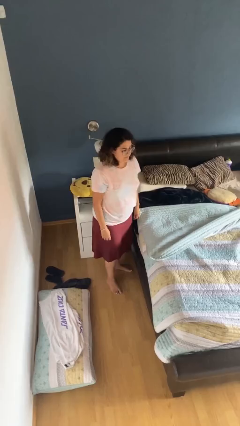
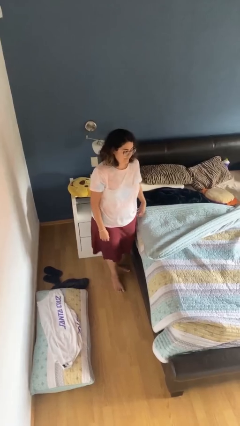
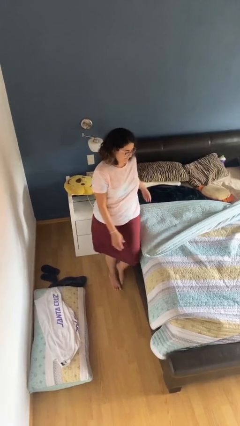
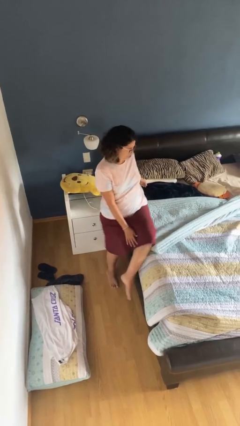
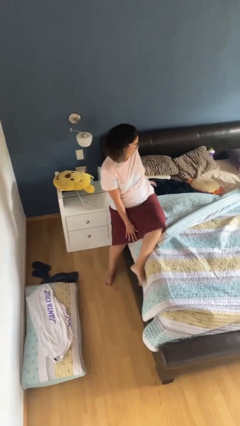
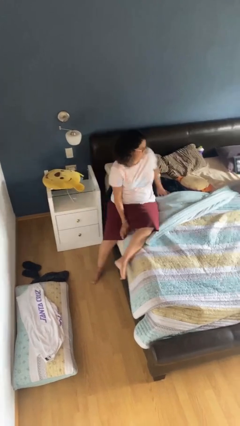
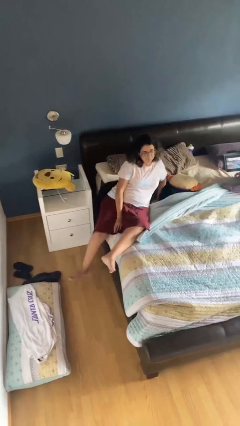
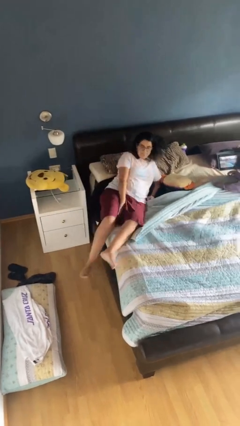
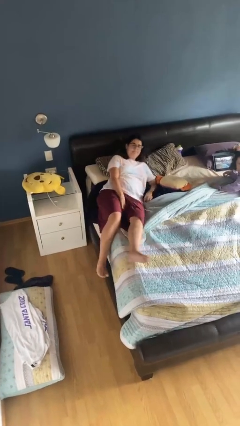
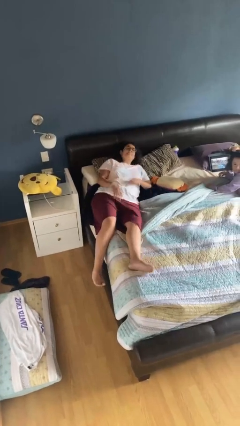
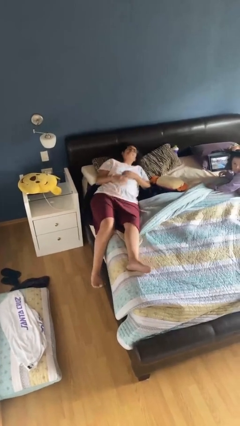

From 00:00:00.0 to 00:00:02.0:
person lies down on bed

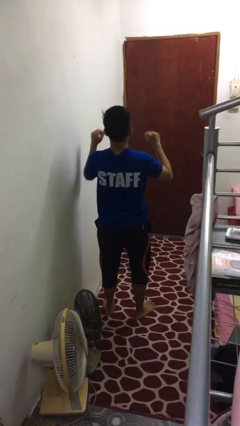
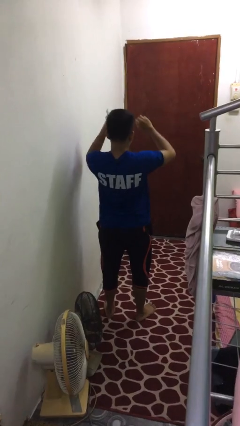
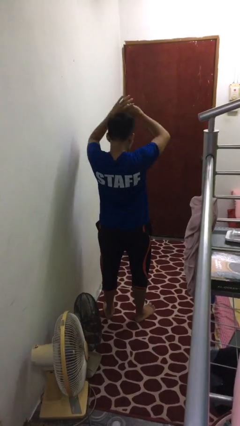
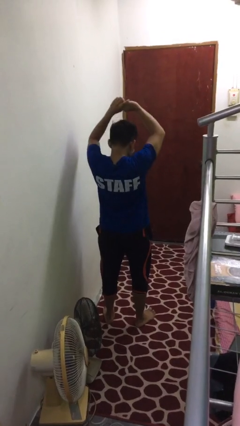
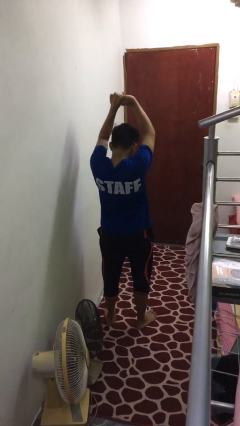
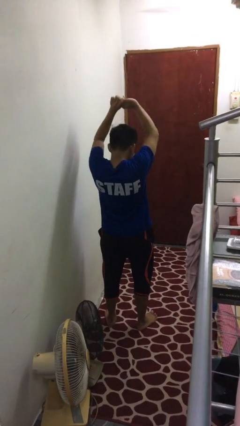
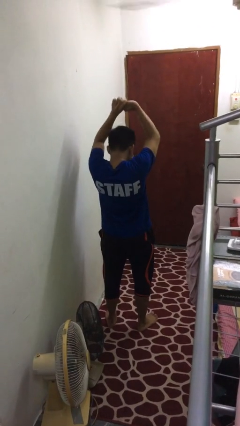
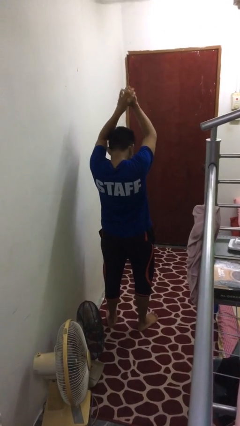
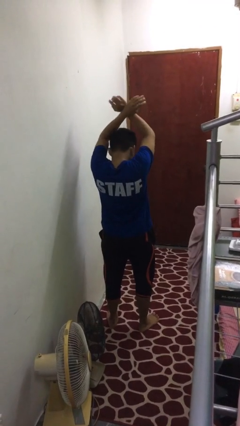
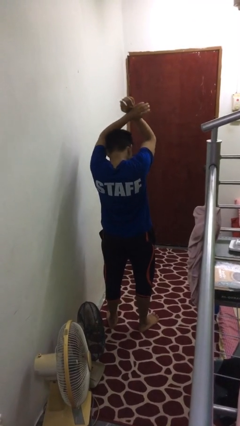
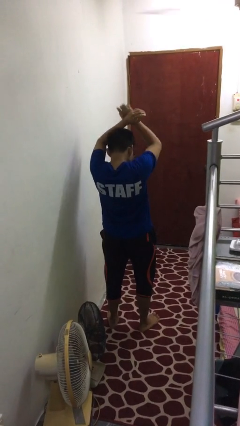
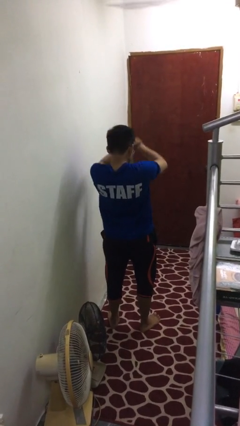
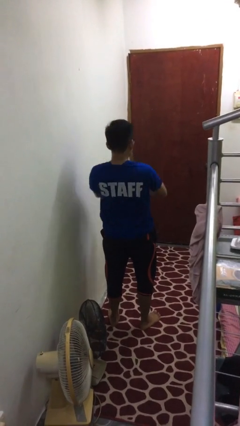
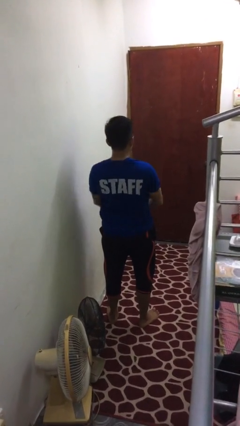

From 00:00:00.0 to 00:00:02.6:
person stretches arms over head

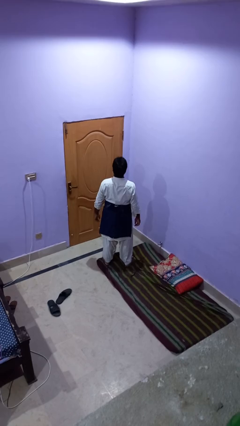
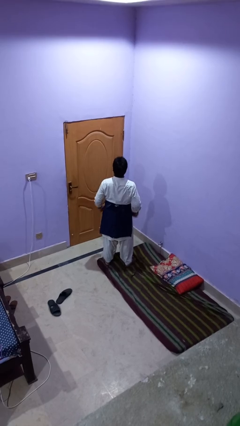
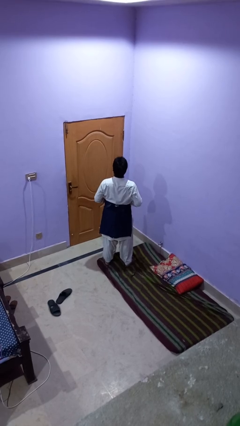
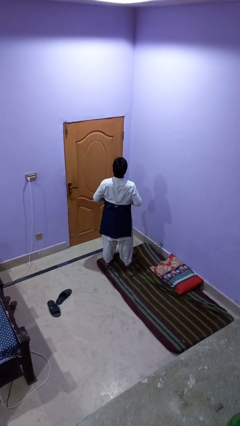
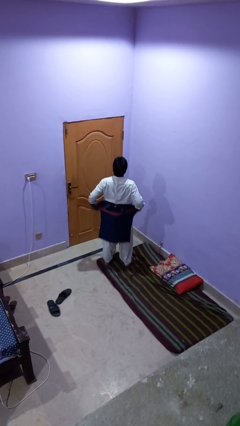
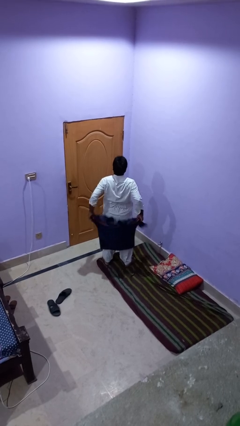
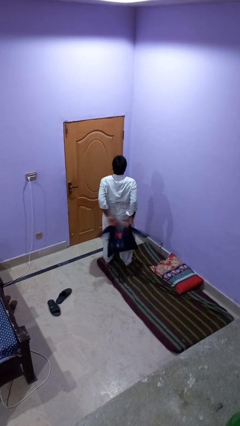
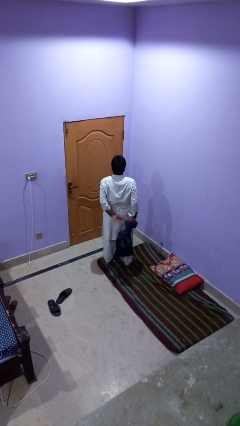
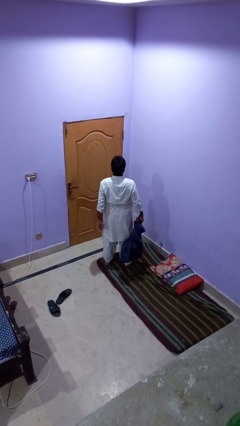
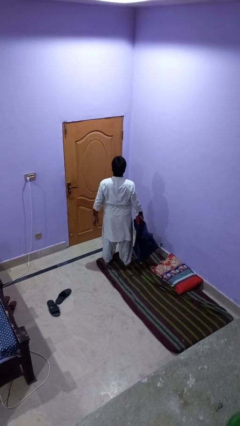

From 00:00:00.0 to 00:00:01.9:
person unties jacket around waist

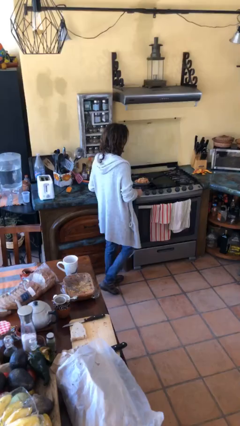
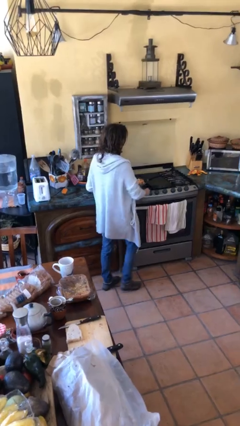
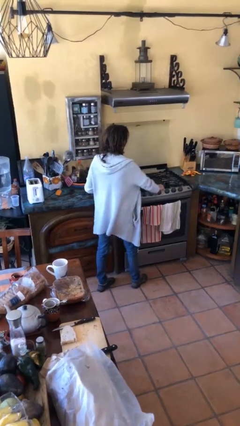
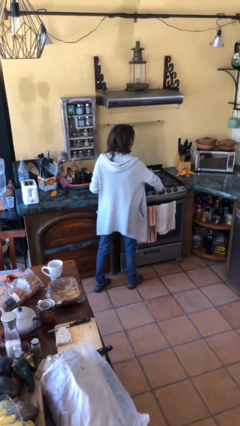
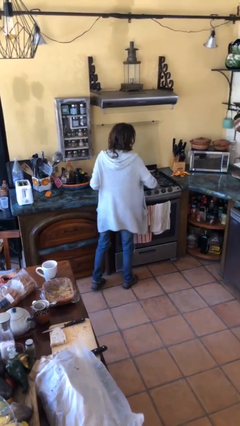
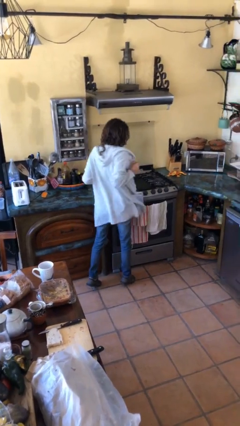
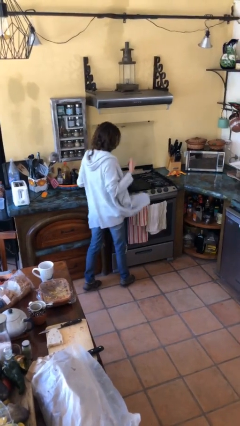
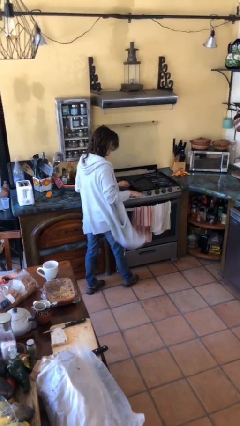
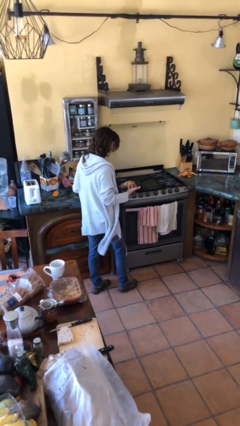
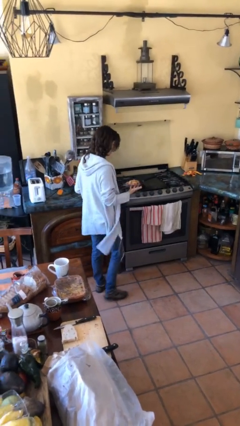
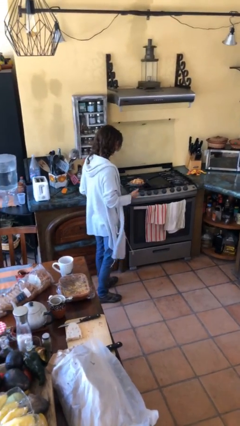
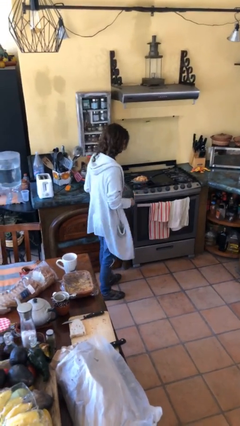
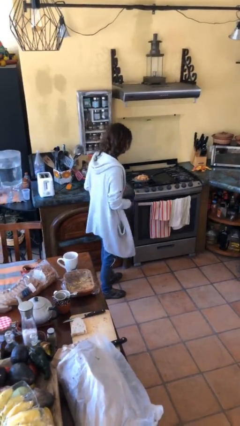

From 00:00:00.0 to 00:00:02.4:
person burns hand

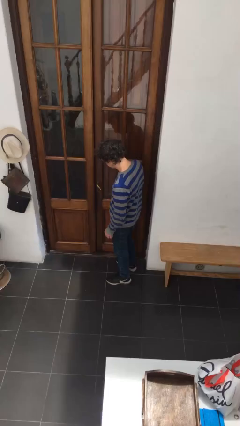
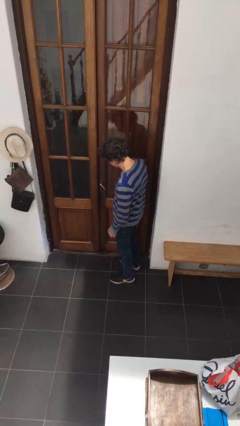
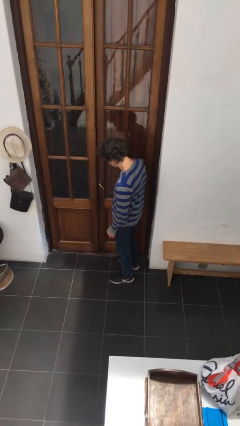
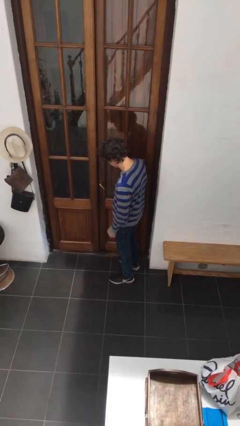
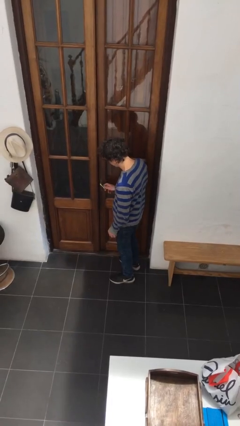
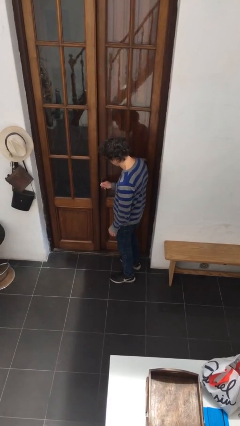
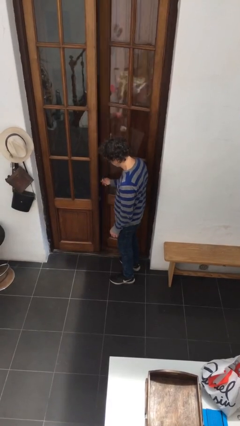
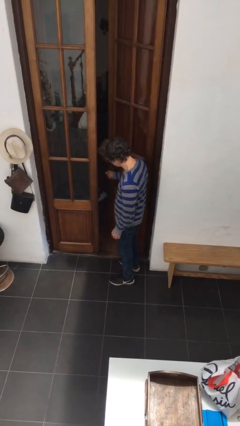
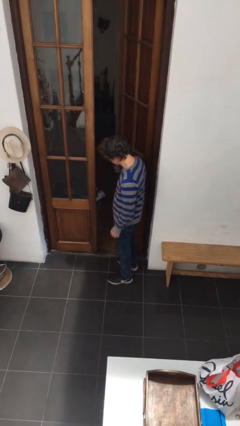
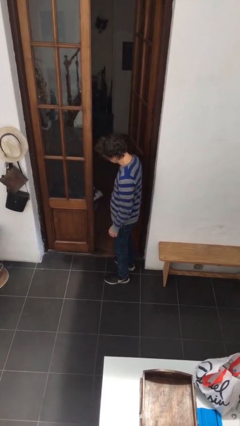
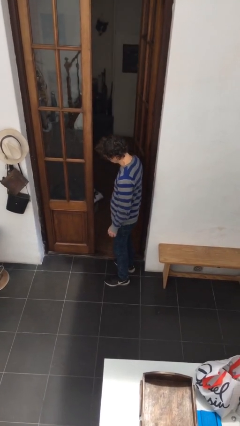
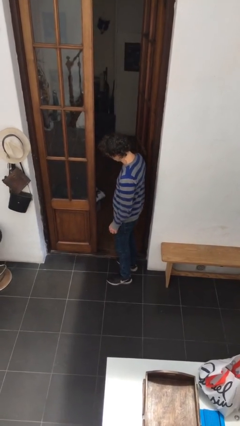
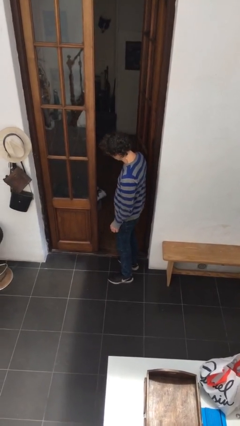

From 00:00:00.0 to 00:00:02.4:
person opens facility door

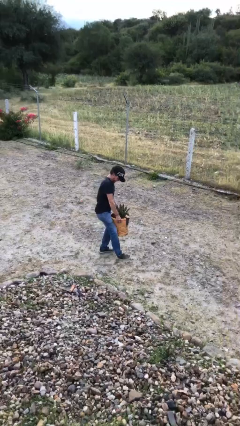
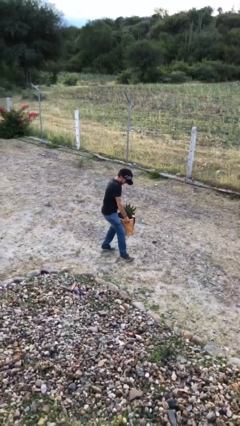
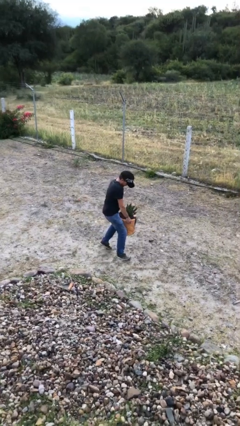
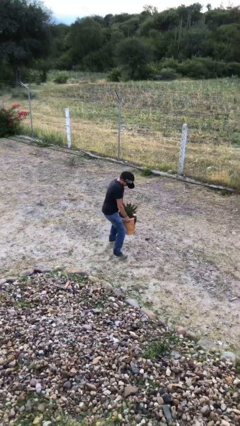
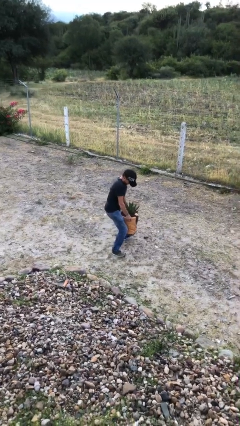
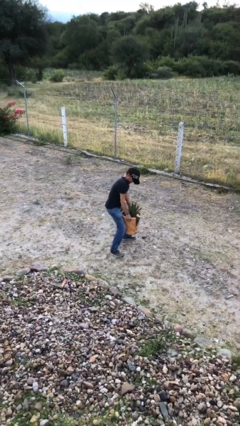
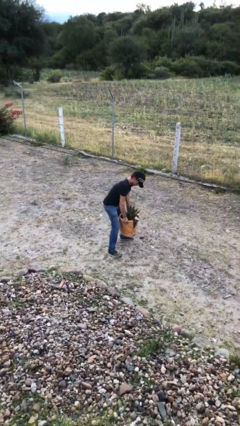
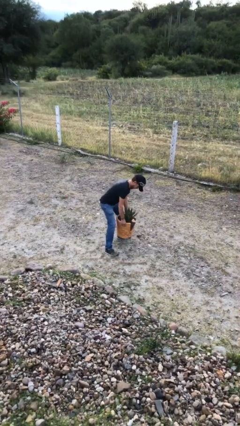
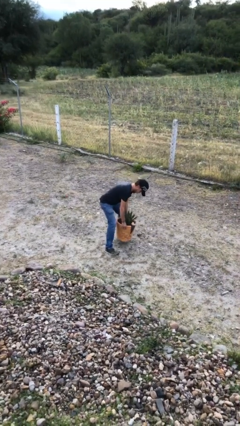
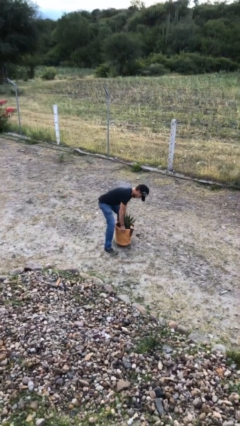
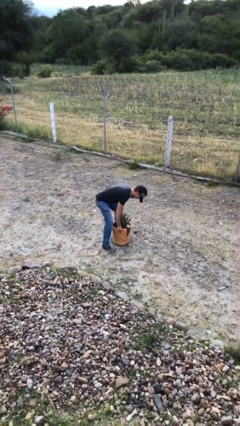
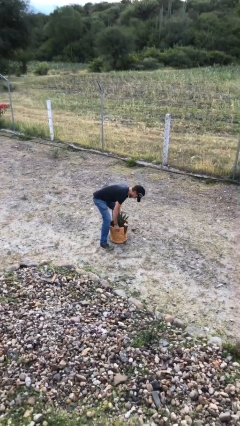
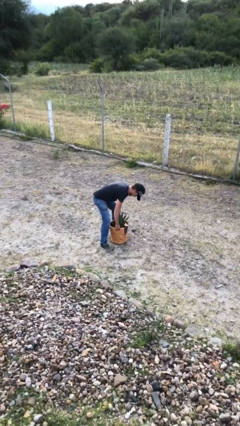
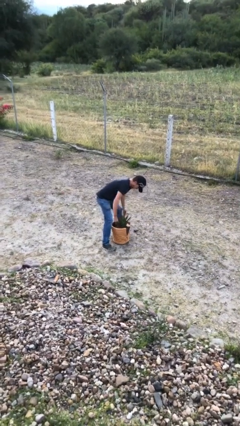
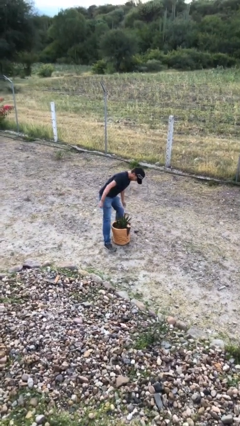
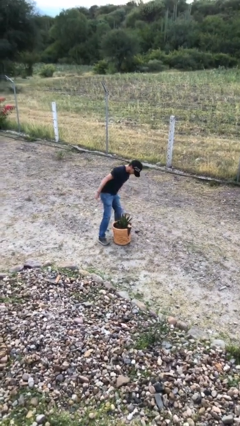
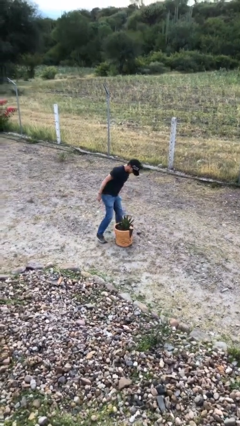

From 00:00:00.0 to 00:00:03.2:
person puts down object on floor

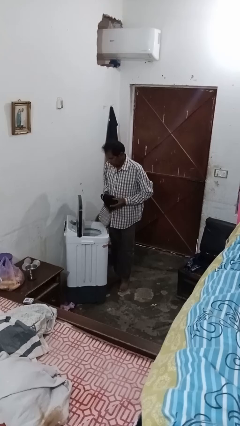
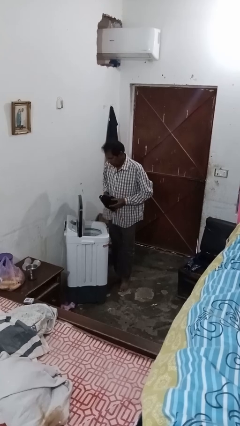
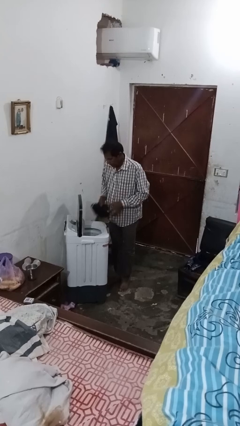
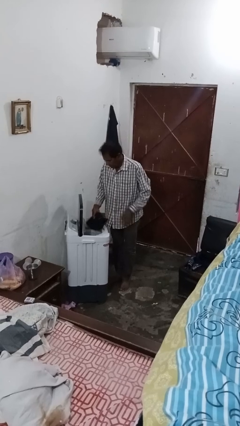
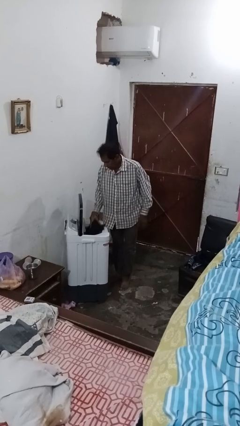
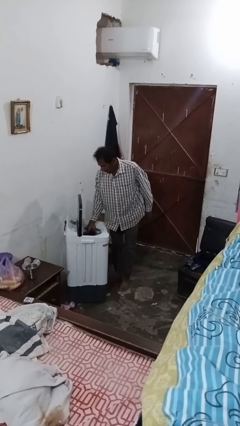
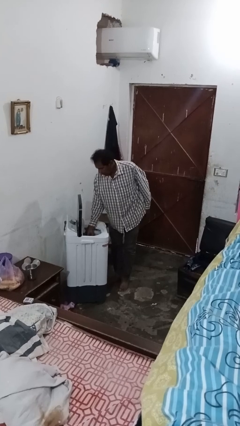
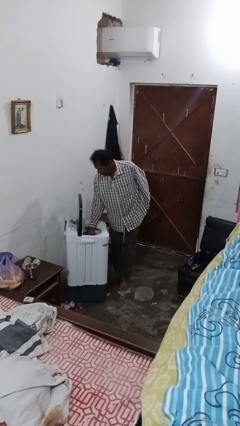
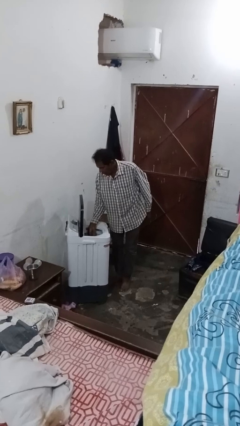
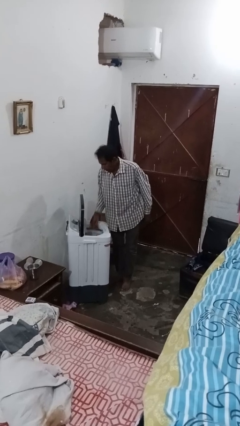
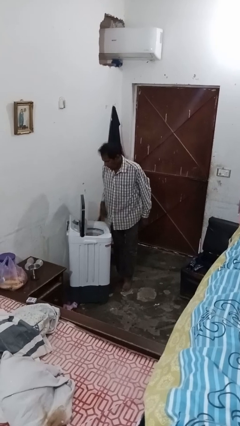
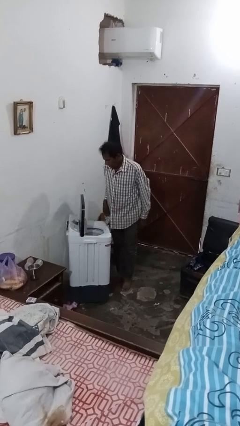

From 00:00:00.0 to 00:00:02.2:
person loads clotheswasher

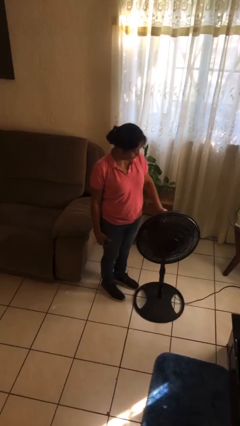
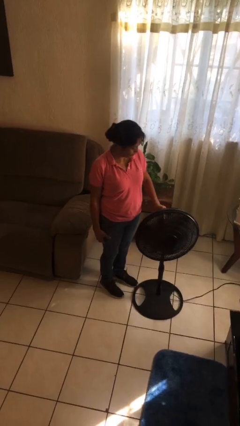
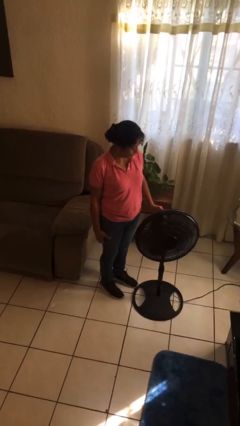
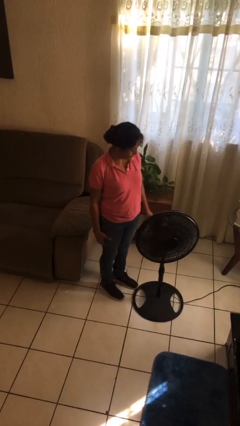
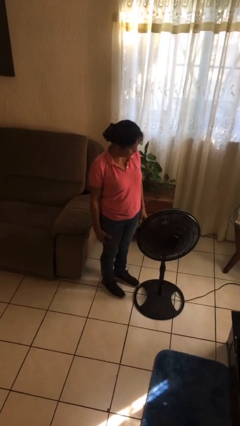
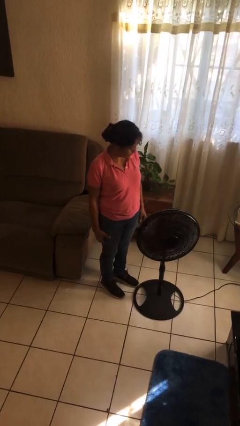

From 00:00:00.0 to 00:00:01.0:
person turns on fan
